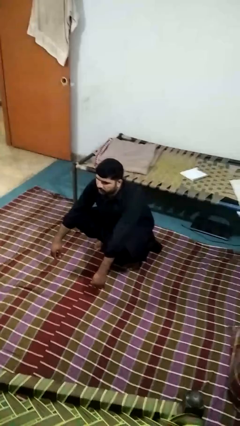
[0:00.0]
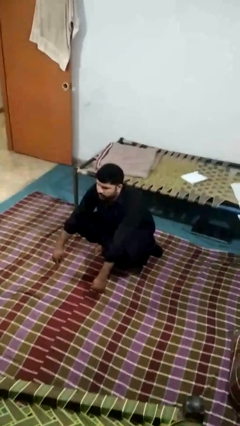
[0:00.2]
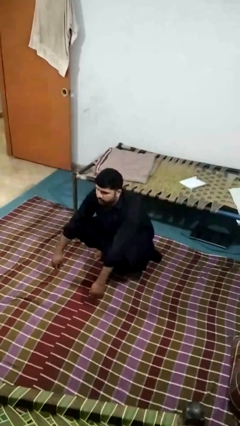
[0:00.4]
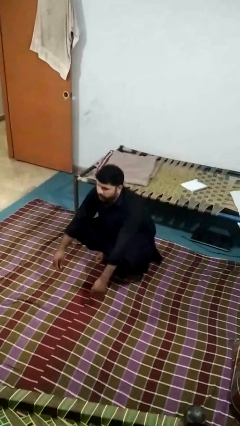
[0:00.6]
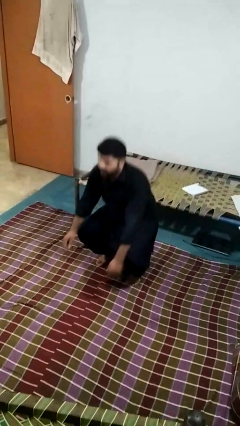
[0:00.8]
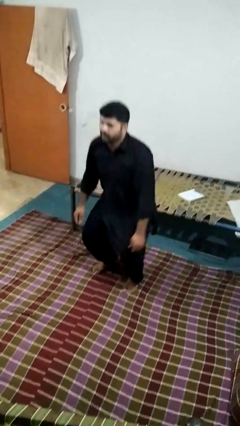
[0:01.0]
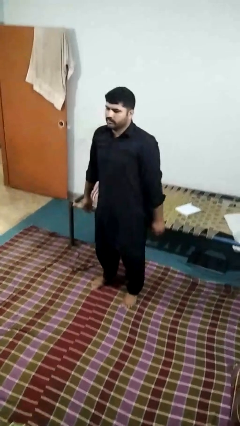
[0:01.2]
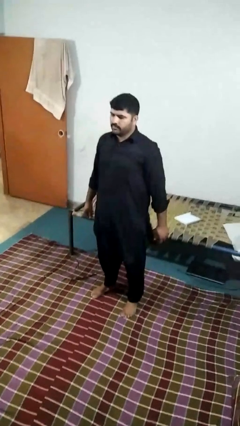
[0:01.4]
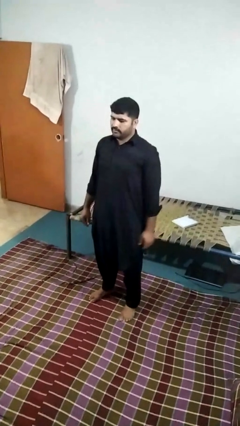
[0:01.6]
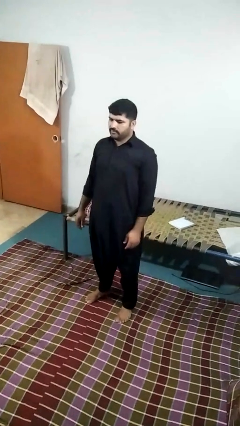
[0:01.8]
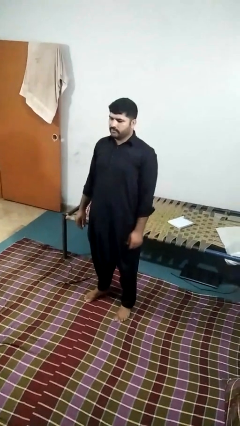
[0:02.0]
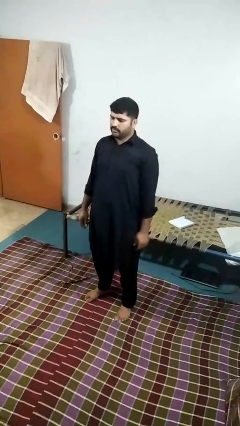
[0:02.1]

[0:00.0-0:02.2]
person stands up

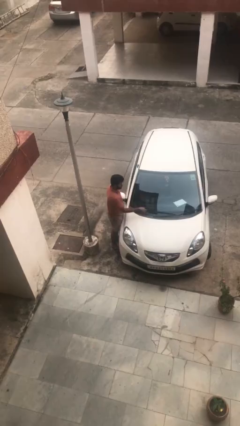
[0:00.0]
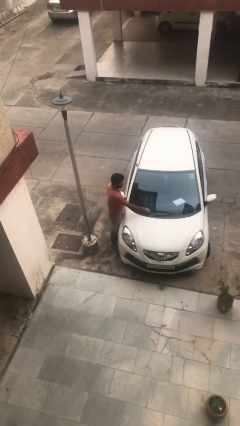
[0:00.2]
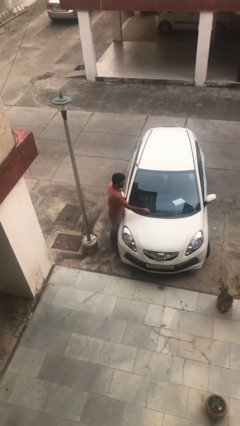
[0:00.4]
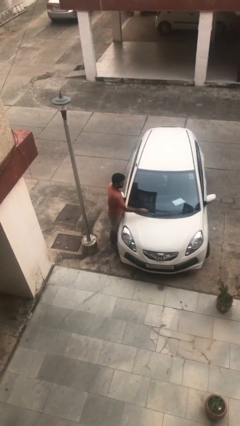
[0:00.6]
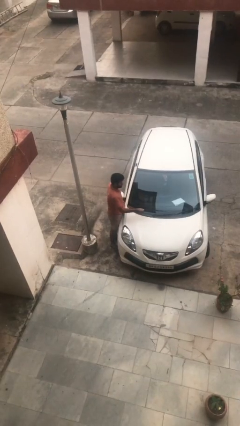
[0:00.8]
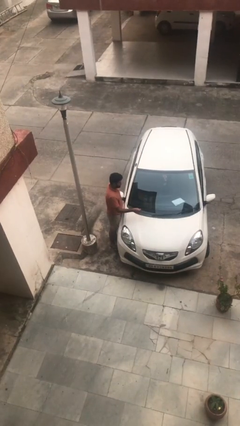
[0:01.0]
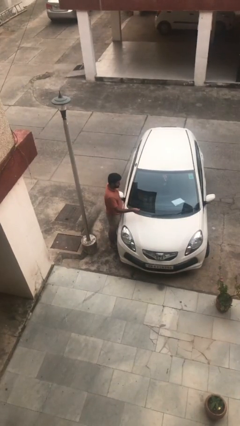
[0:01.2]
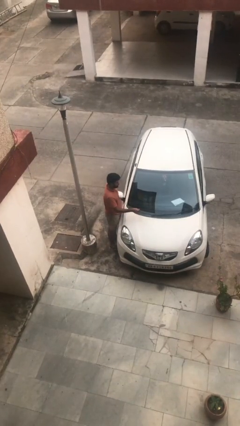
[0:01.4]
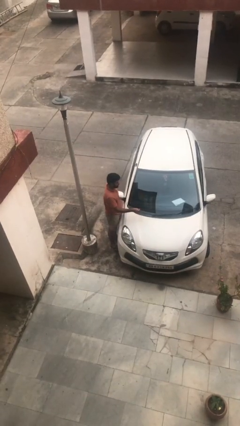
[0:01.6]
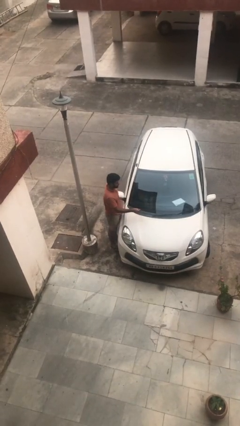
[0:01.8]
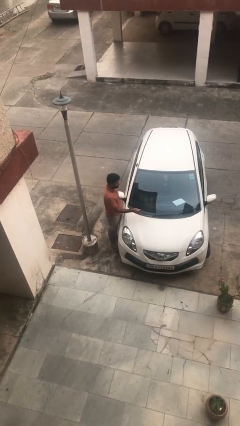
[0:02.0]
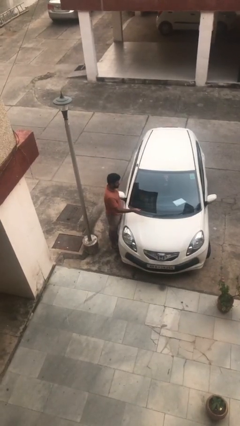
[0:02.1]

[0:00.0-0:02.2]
person flips up car wipers

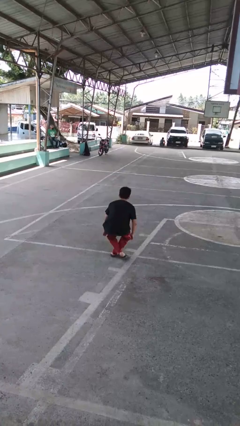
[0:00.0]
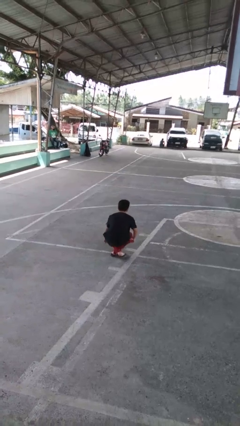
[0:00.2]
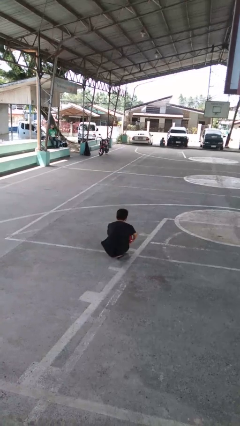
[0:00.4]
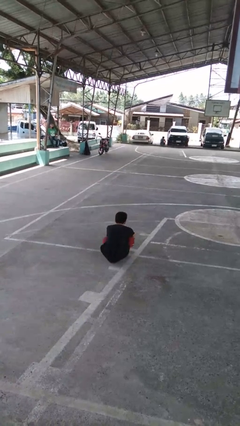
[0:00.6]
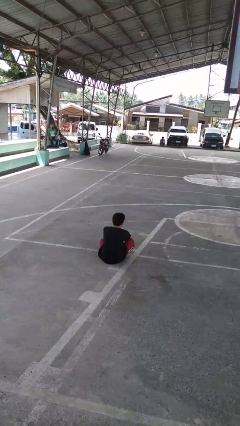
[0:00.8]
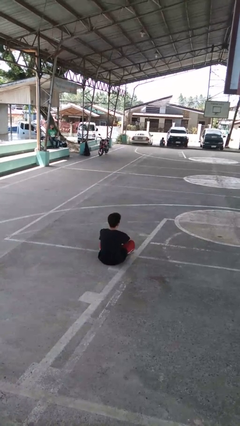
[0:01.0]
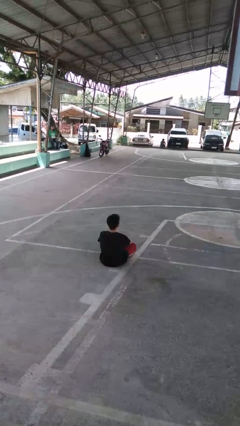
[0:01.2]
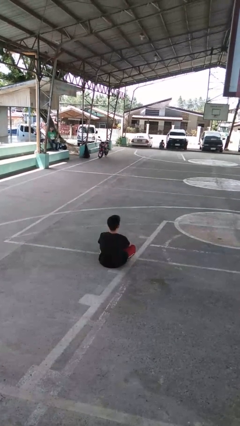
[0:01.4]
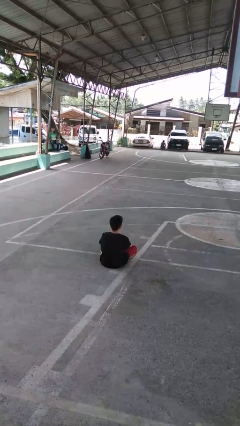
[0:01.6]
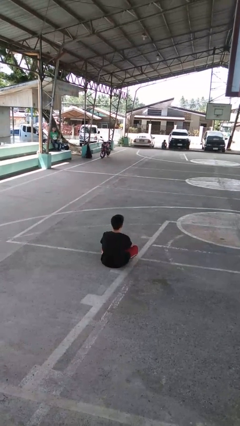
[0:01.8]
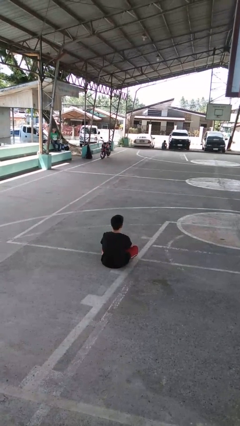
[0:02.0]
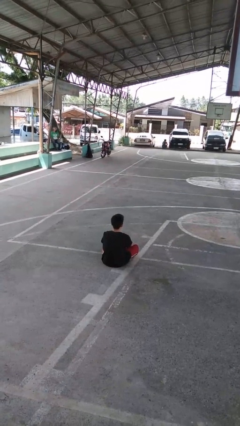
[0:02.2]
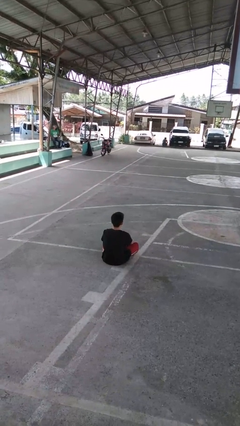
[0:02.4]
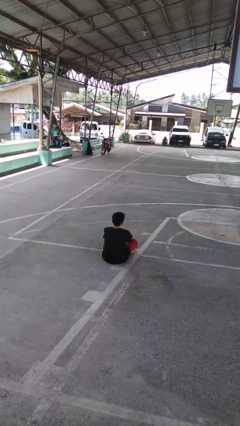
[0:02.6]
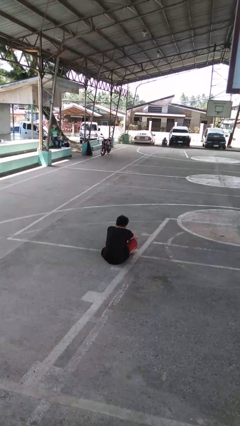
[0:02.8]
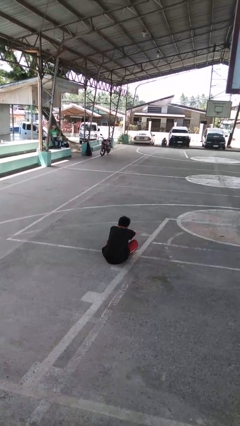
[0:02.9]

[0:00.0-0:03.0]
person sits crisscross

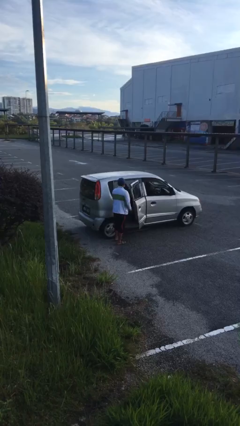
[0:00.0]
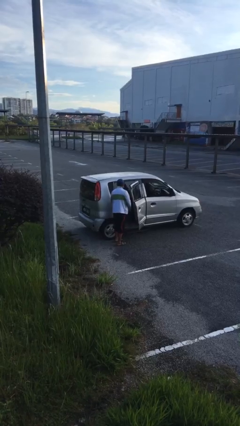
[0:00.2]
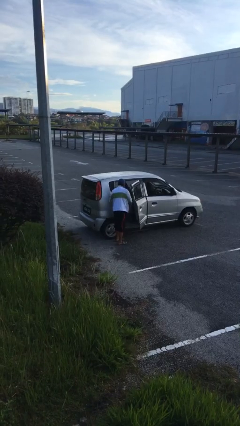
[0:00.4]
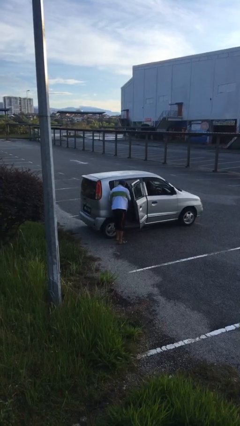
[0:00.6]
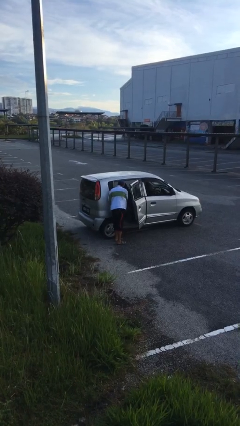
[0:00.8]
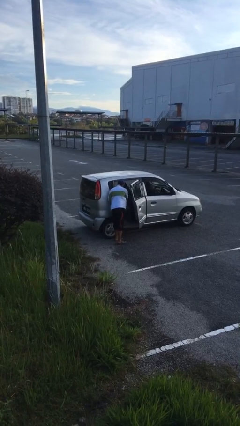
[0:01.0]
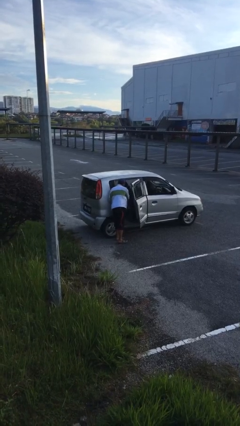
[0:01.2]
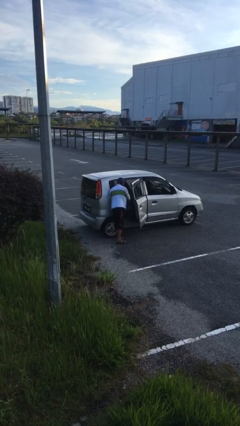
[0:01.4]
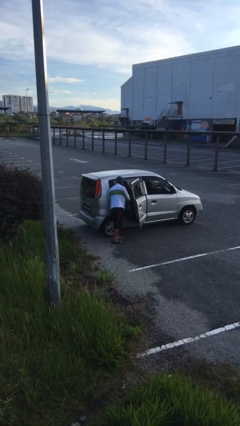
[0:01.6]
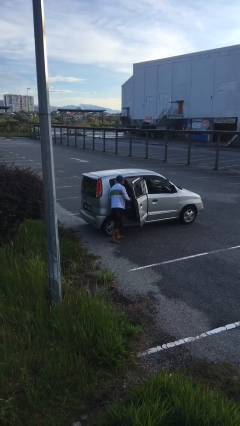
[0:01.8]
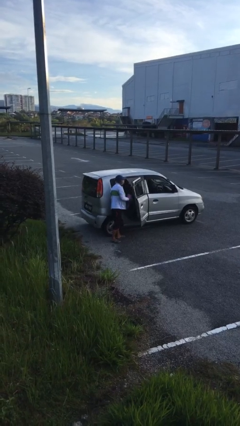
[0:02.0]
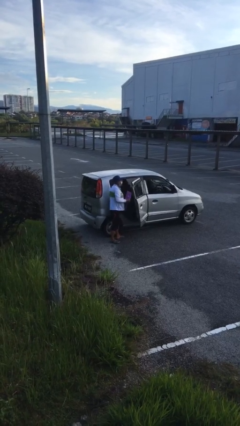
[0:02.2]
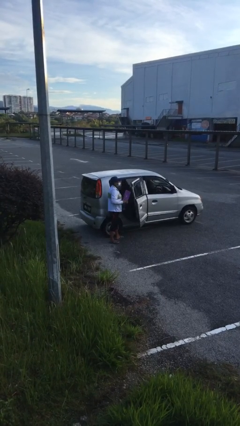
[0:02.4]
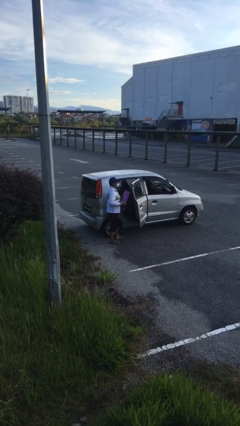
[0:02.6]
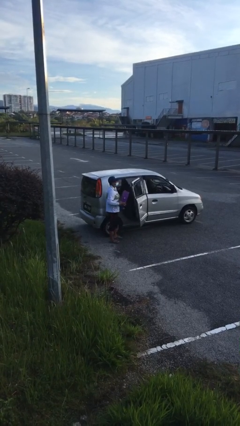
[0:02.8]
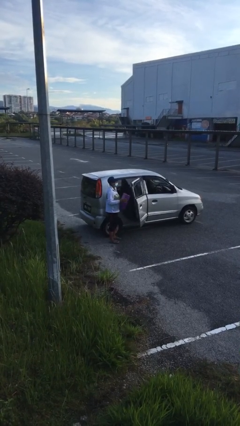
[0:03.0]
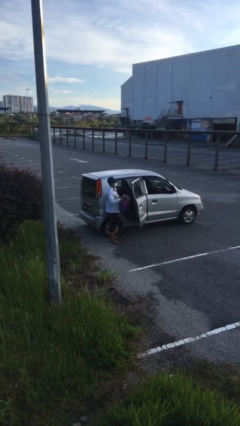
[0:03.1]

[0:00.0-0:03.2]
person unloads car

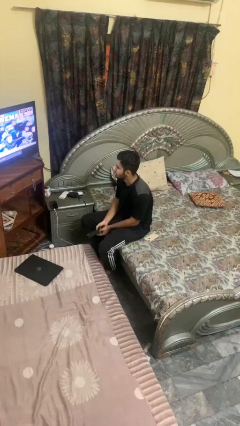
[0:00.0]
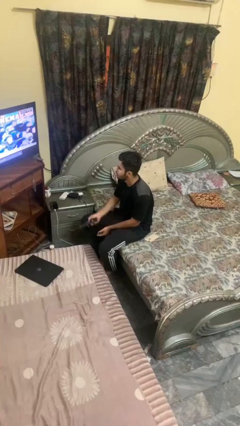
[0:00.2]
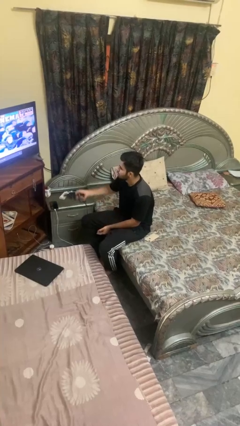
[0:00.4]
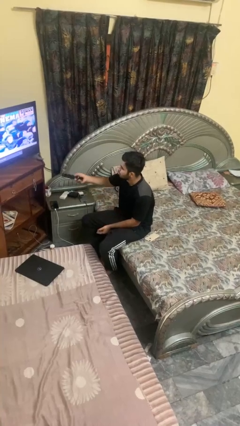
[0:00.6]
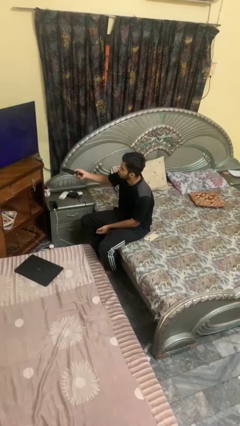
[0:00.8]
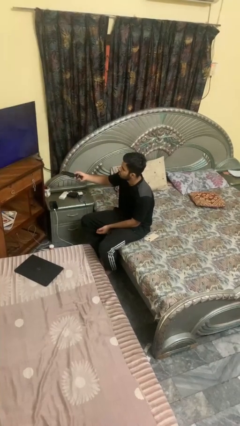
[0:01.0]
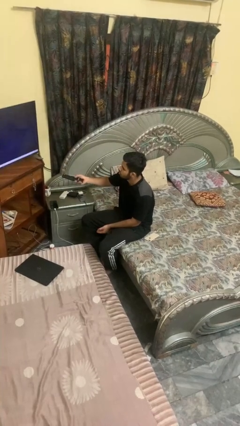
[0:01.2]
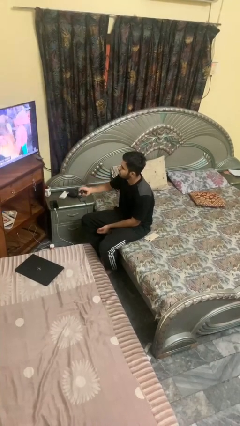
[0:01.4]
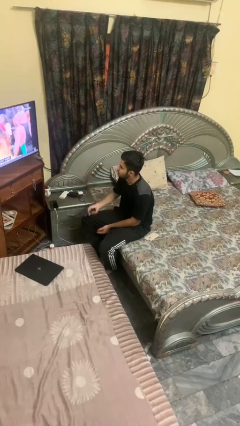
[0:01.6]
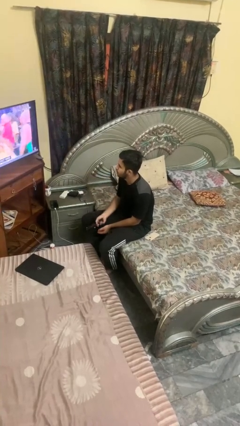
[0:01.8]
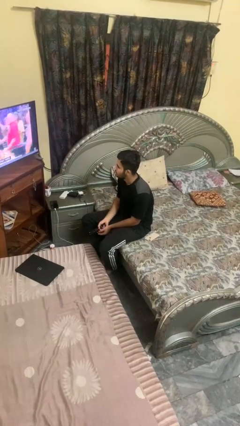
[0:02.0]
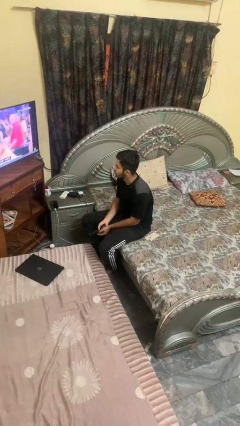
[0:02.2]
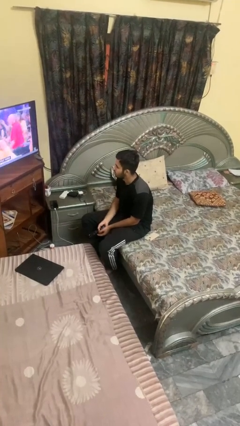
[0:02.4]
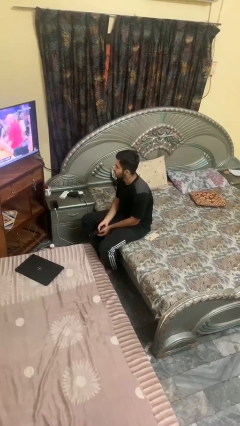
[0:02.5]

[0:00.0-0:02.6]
person uses television remote

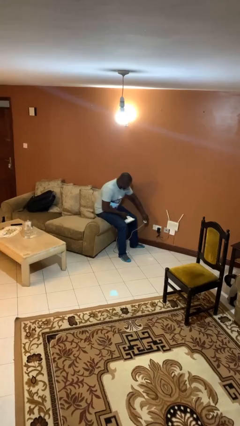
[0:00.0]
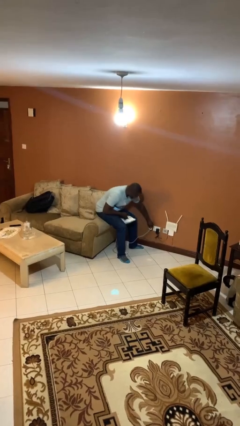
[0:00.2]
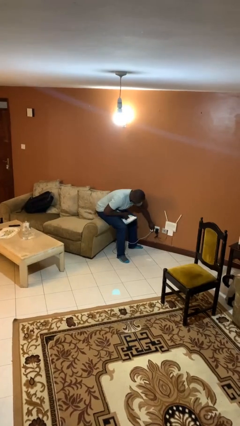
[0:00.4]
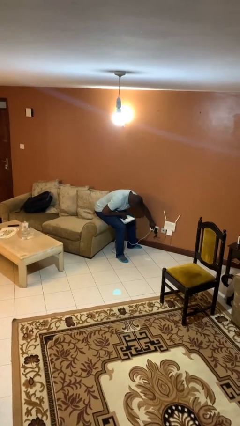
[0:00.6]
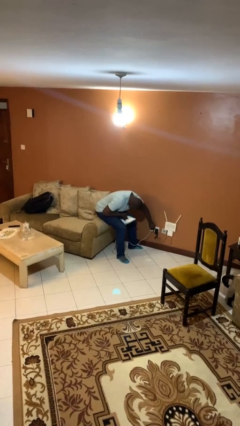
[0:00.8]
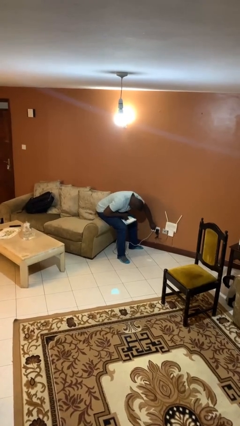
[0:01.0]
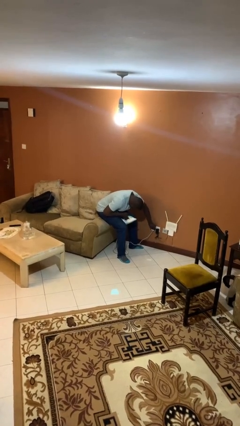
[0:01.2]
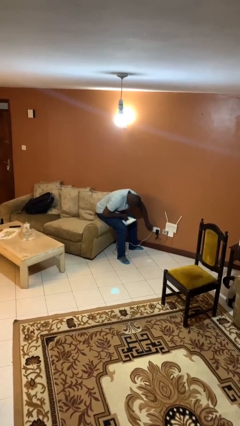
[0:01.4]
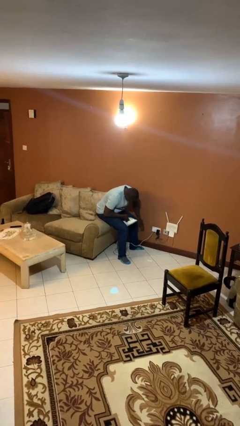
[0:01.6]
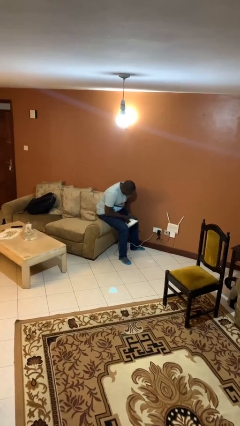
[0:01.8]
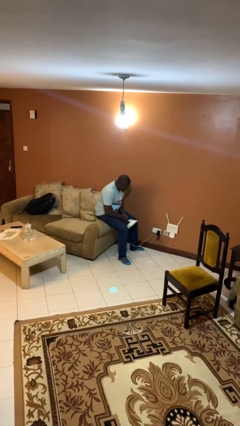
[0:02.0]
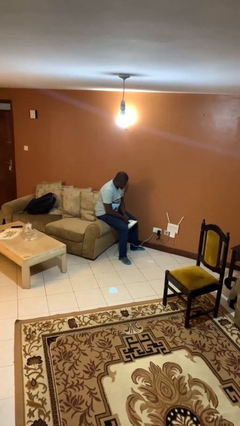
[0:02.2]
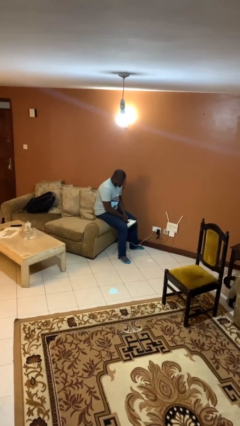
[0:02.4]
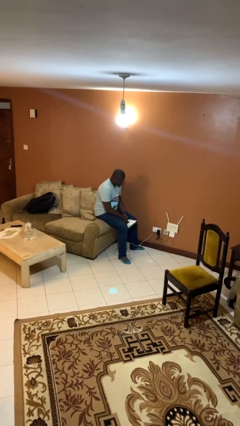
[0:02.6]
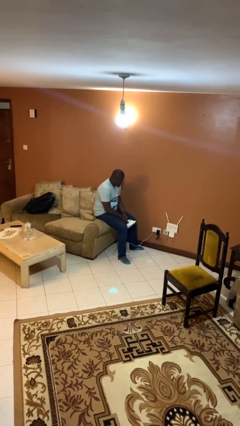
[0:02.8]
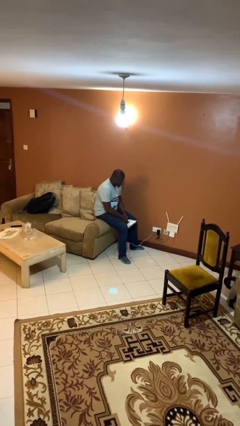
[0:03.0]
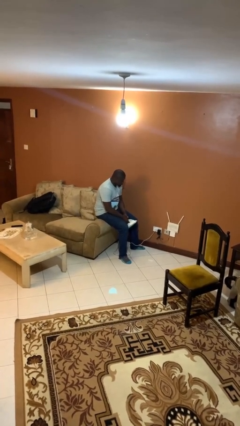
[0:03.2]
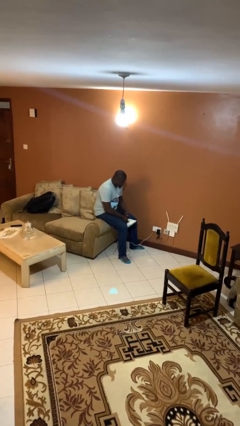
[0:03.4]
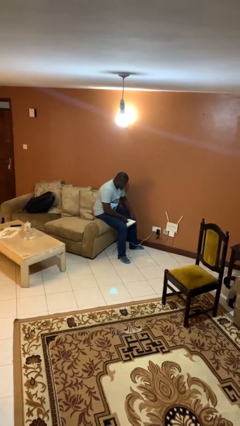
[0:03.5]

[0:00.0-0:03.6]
person plugs into electrical socket

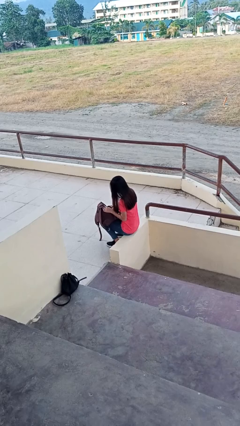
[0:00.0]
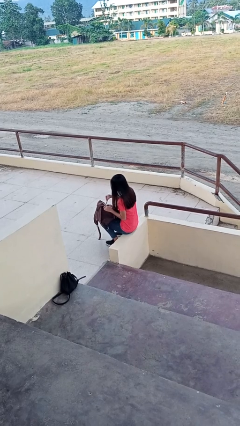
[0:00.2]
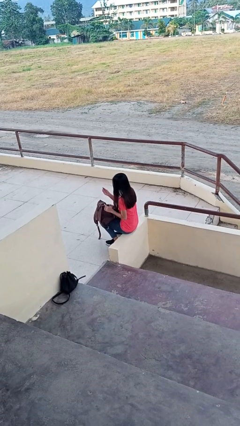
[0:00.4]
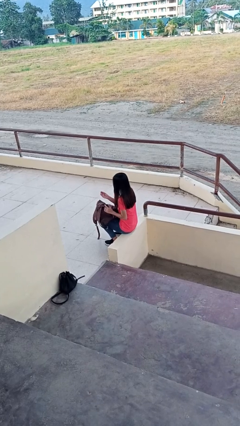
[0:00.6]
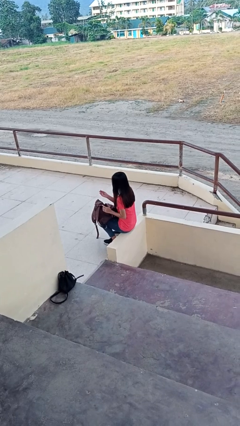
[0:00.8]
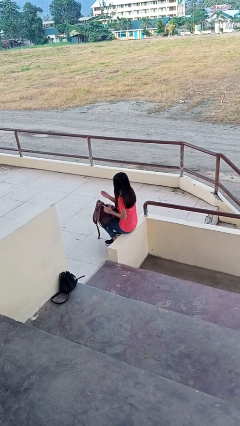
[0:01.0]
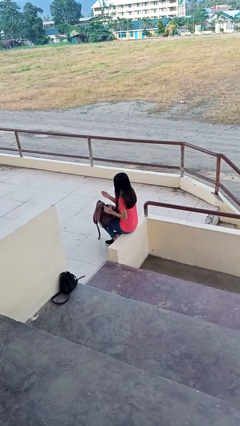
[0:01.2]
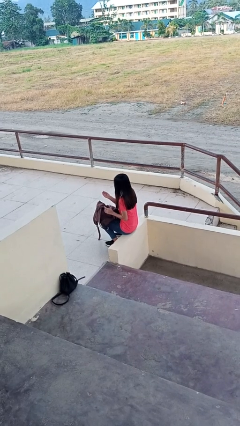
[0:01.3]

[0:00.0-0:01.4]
person takes object from backpack
